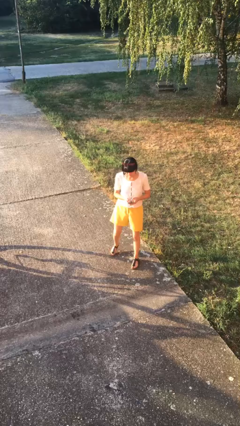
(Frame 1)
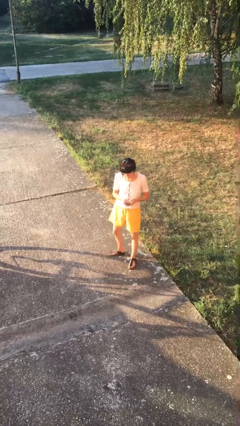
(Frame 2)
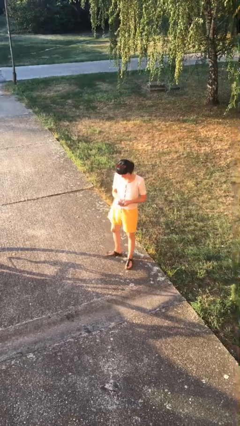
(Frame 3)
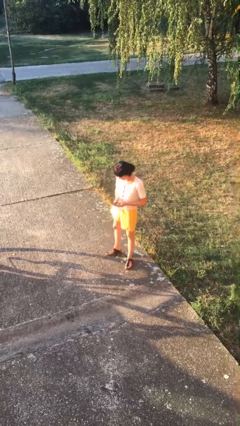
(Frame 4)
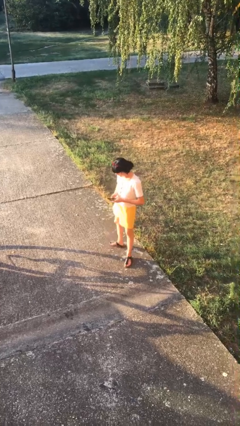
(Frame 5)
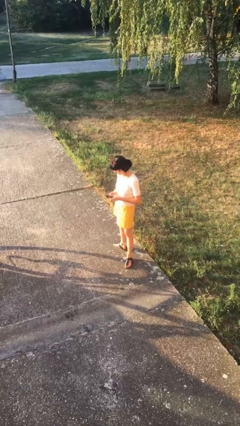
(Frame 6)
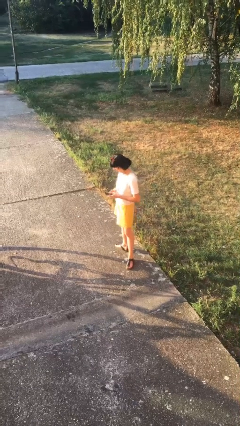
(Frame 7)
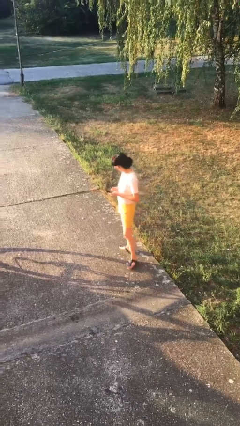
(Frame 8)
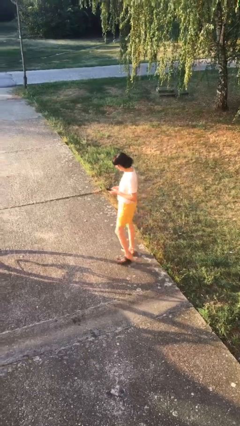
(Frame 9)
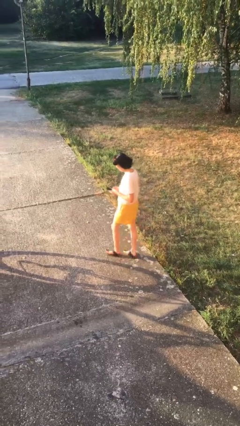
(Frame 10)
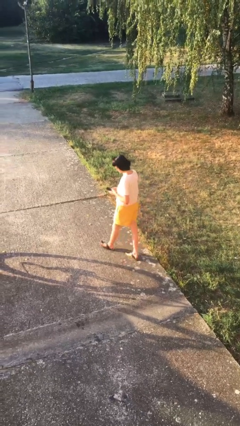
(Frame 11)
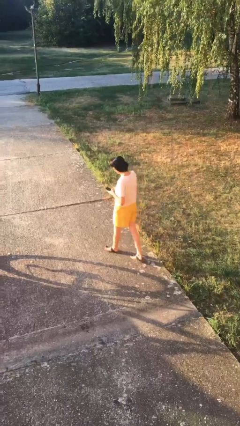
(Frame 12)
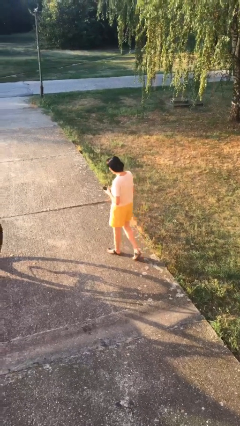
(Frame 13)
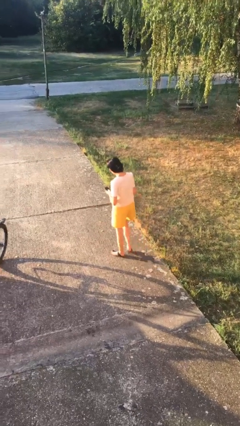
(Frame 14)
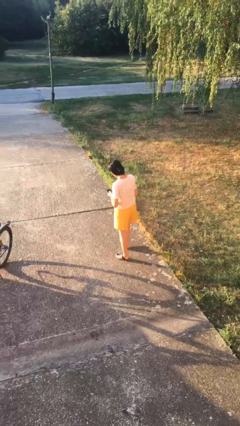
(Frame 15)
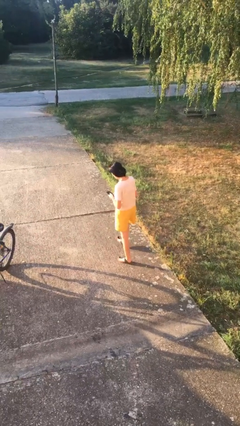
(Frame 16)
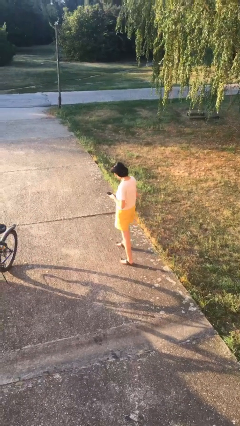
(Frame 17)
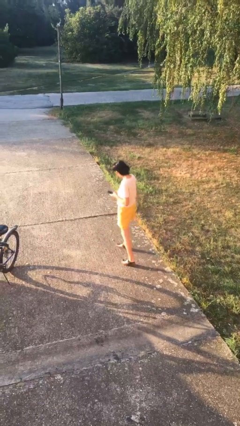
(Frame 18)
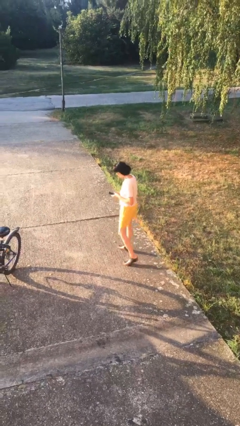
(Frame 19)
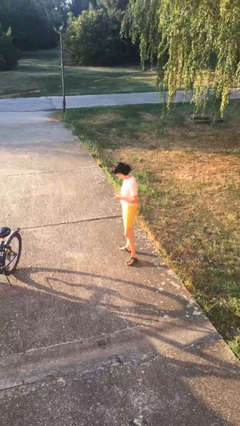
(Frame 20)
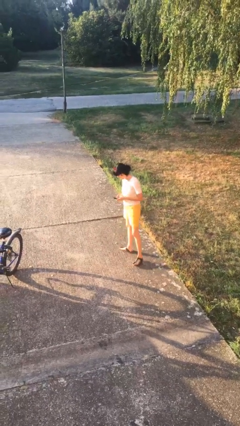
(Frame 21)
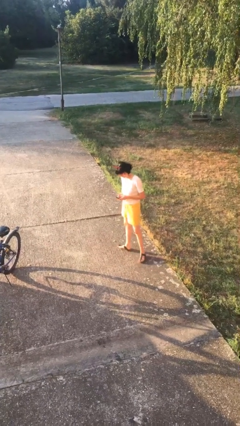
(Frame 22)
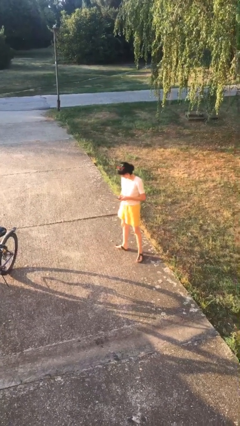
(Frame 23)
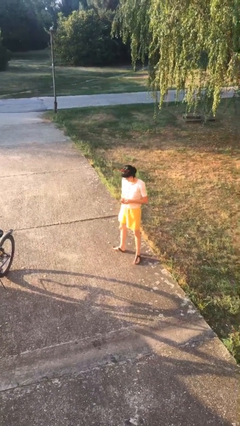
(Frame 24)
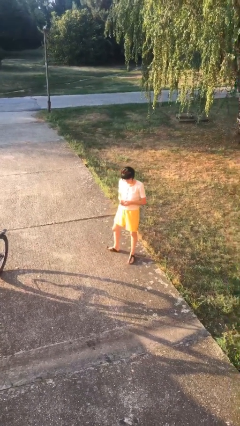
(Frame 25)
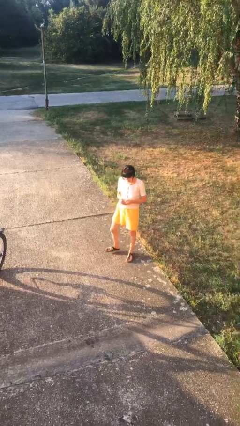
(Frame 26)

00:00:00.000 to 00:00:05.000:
person texts on phone

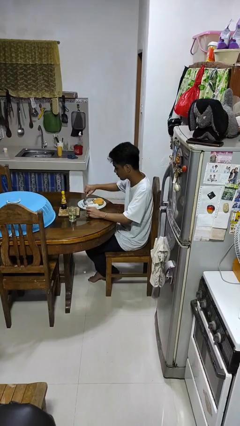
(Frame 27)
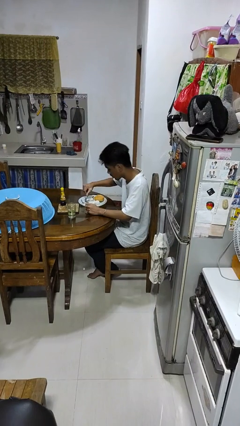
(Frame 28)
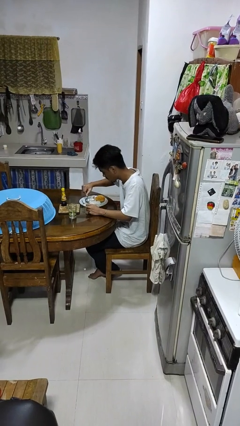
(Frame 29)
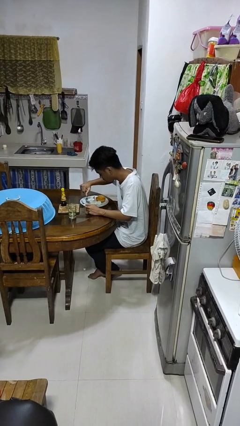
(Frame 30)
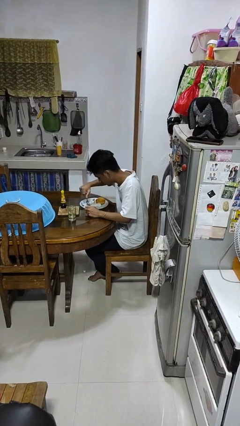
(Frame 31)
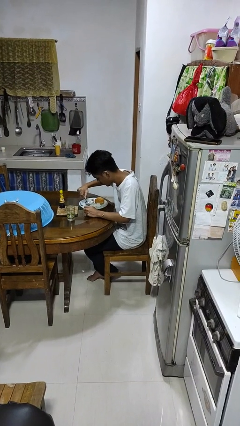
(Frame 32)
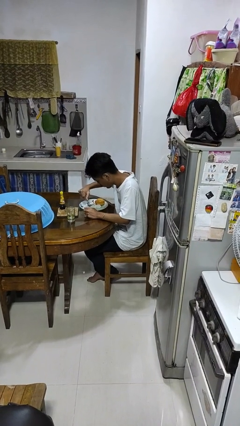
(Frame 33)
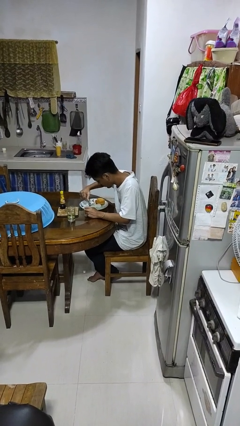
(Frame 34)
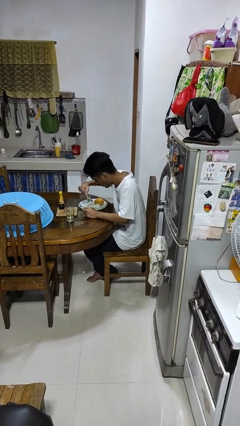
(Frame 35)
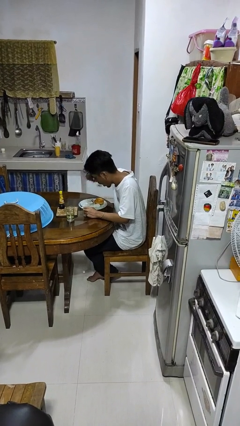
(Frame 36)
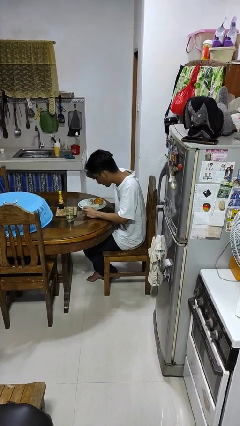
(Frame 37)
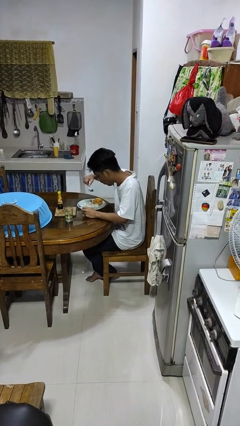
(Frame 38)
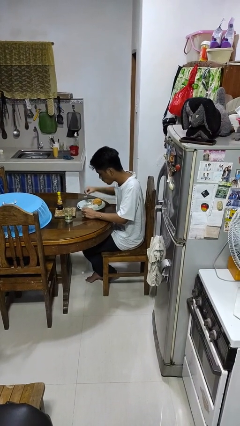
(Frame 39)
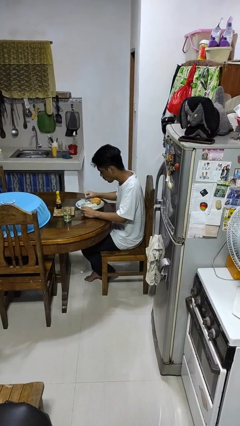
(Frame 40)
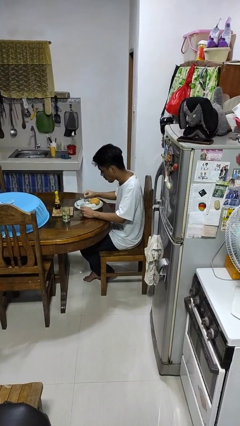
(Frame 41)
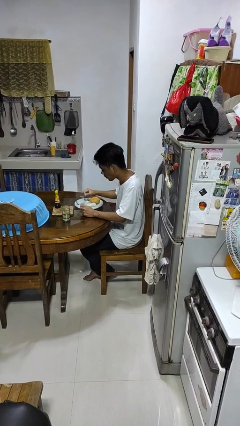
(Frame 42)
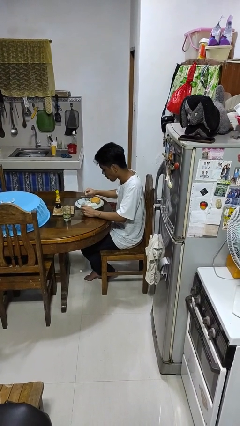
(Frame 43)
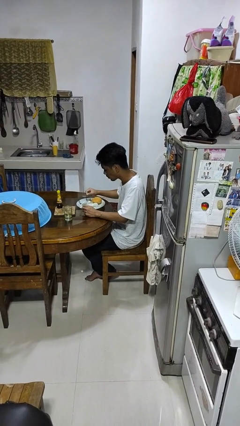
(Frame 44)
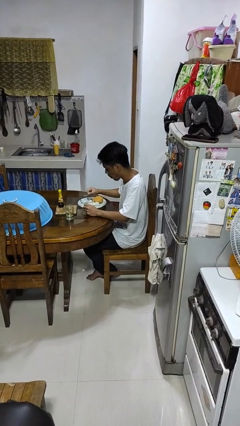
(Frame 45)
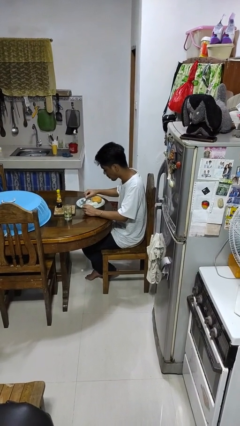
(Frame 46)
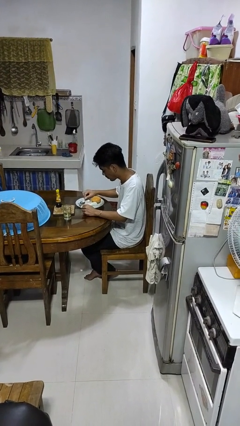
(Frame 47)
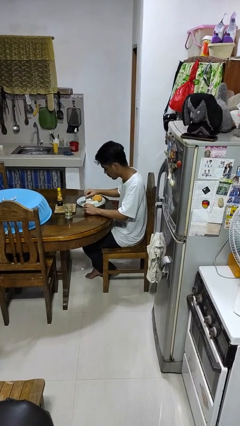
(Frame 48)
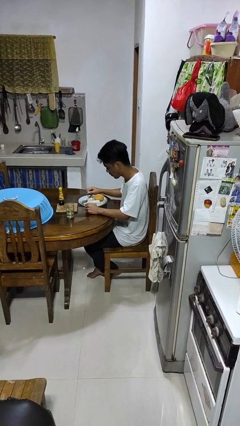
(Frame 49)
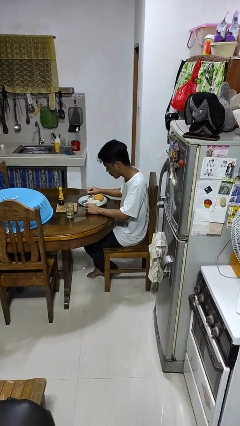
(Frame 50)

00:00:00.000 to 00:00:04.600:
person eats with utensil

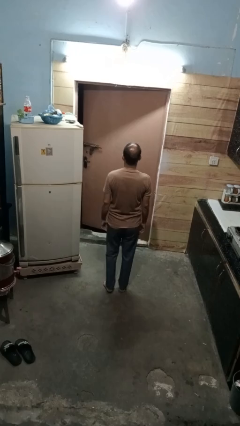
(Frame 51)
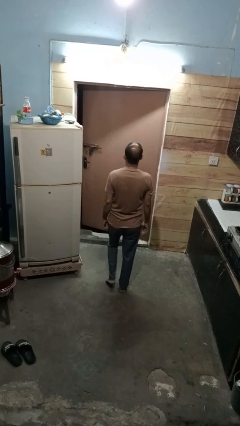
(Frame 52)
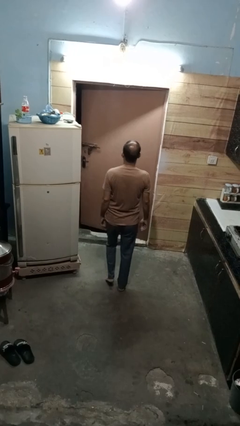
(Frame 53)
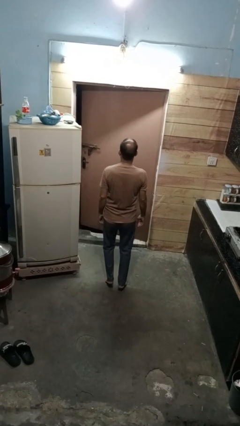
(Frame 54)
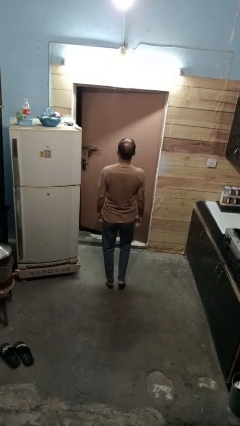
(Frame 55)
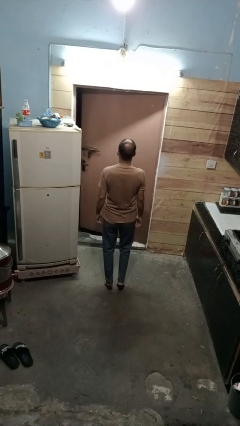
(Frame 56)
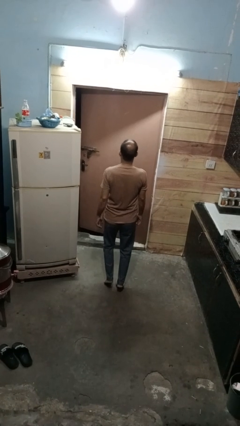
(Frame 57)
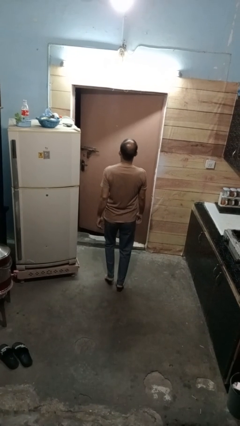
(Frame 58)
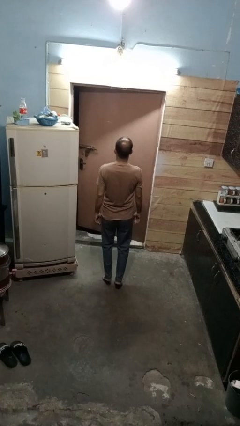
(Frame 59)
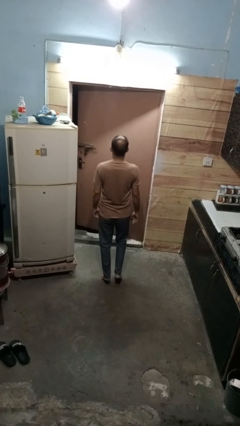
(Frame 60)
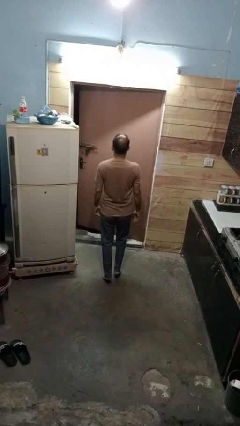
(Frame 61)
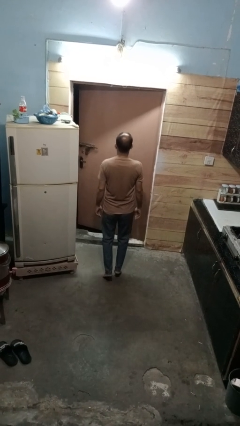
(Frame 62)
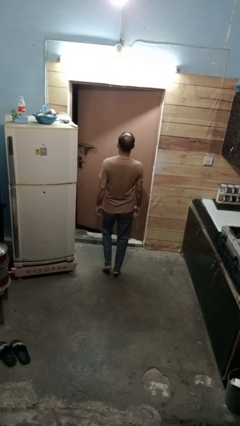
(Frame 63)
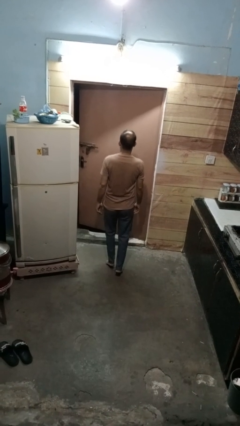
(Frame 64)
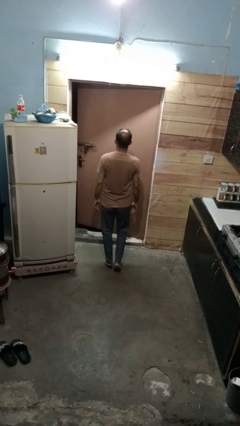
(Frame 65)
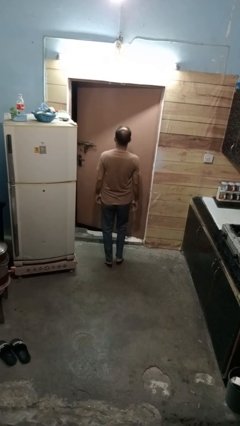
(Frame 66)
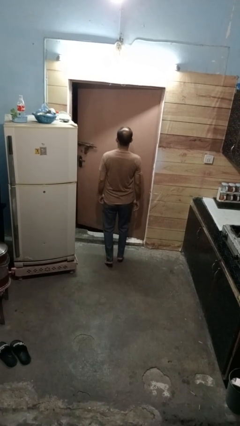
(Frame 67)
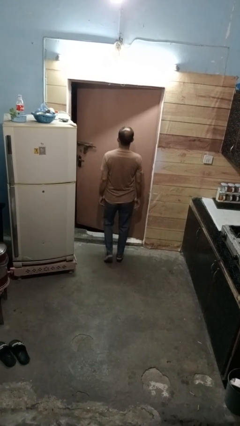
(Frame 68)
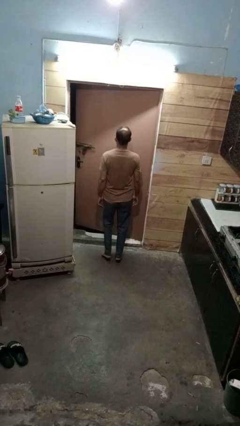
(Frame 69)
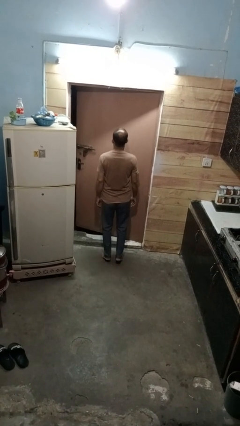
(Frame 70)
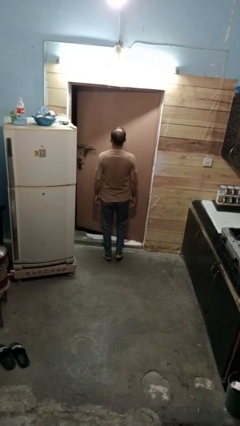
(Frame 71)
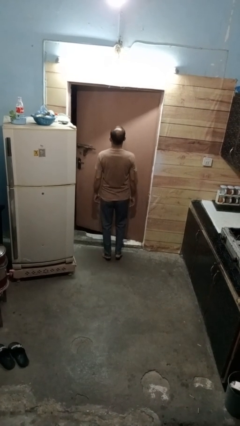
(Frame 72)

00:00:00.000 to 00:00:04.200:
person walks tiptoe

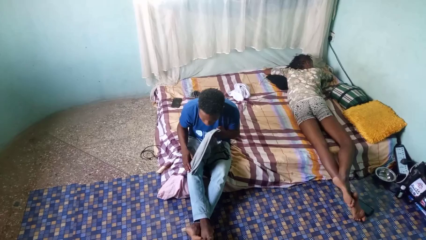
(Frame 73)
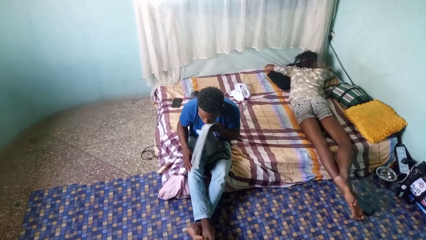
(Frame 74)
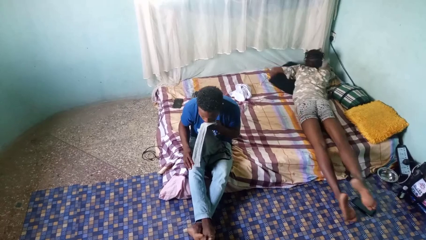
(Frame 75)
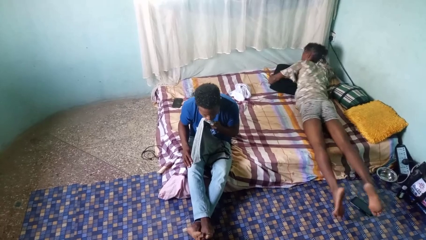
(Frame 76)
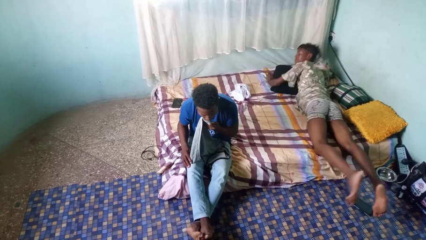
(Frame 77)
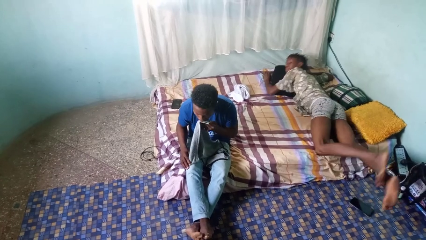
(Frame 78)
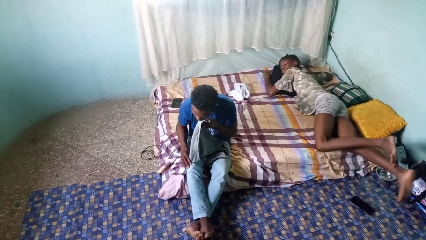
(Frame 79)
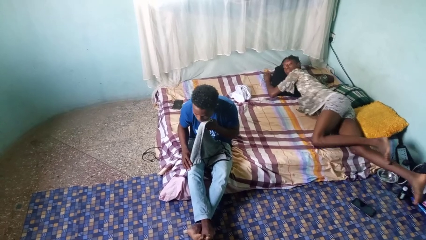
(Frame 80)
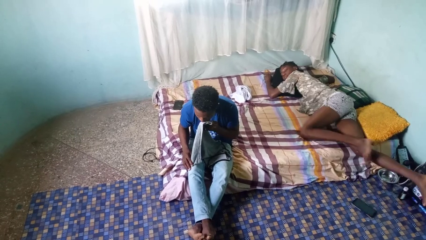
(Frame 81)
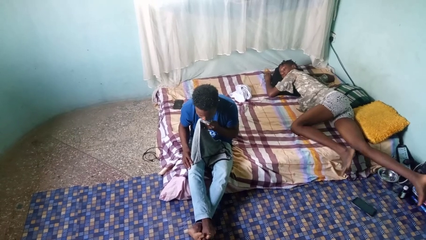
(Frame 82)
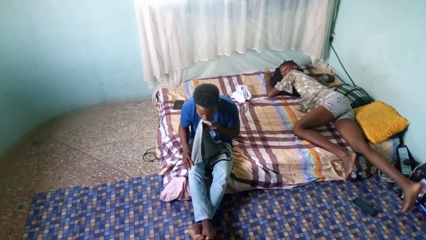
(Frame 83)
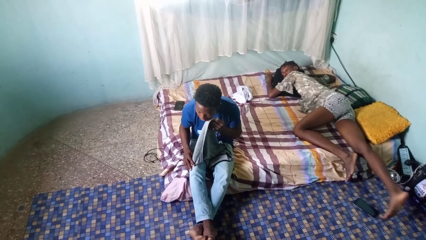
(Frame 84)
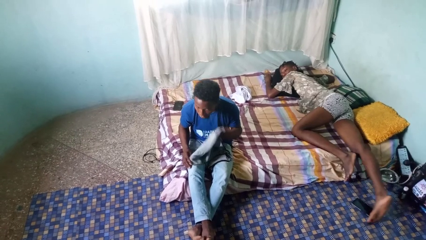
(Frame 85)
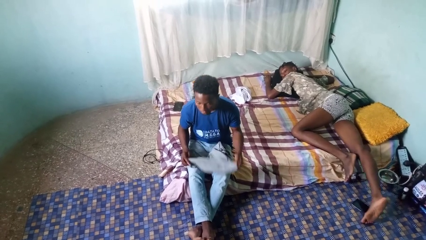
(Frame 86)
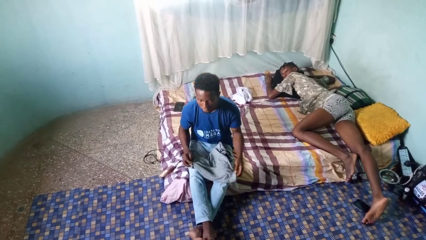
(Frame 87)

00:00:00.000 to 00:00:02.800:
person wipes mouth with napkin

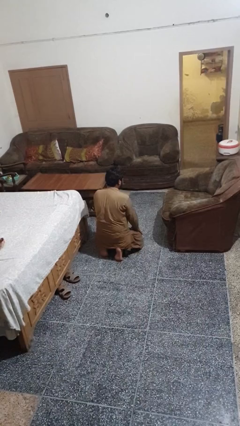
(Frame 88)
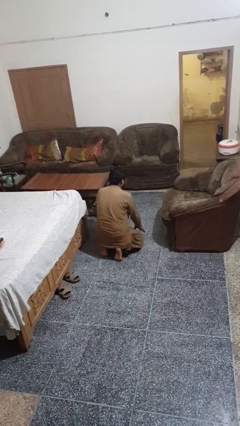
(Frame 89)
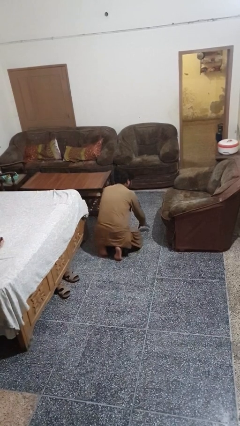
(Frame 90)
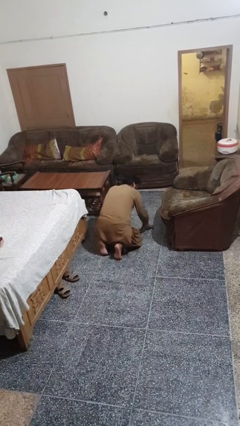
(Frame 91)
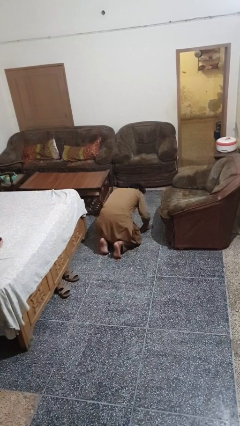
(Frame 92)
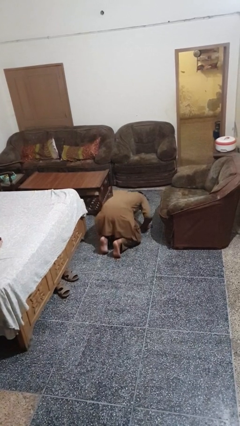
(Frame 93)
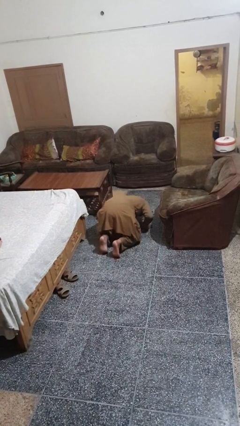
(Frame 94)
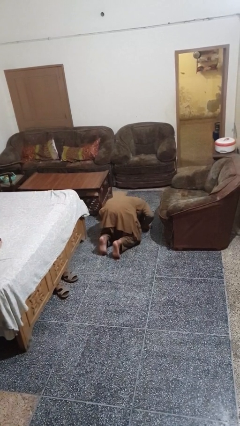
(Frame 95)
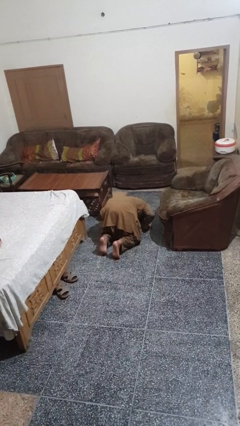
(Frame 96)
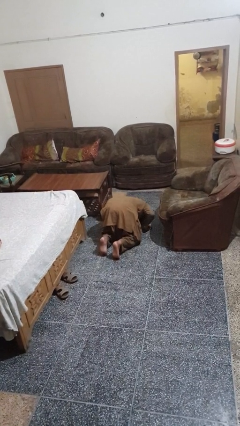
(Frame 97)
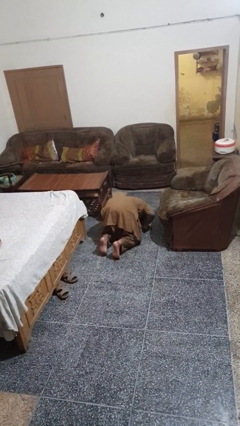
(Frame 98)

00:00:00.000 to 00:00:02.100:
person searches under couch
